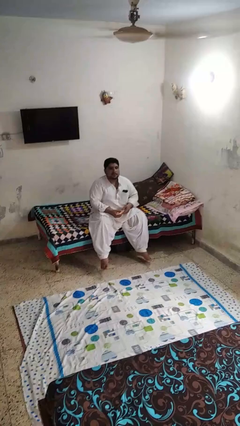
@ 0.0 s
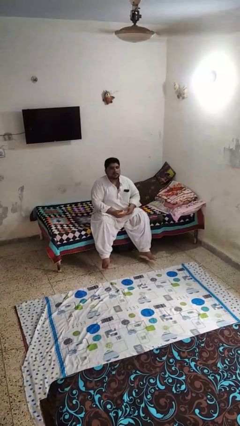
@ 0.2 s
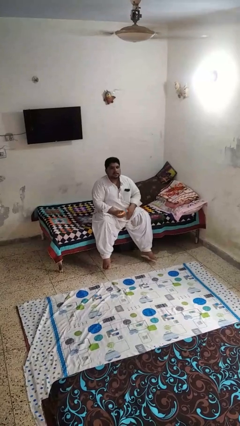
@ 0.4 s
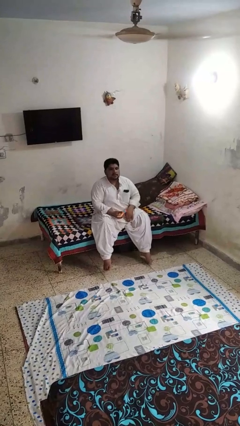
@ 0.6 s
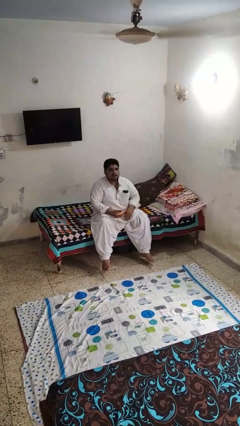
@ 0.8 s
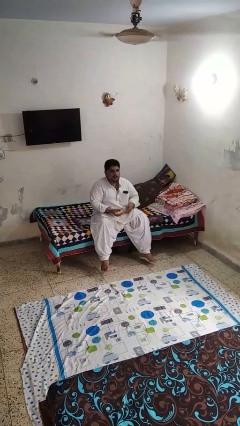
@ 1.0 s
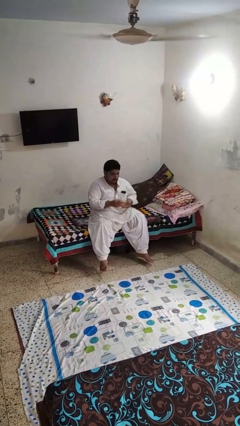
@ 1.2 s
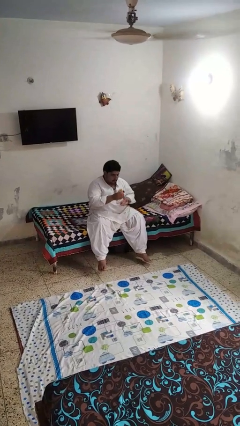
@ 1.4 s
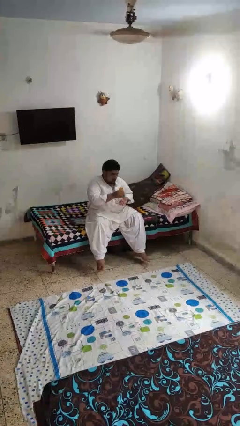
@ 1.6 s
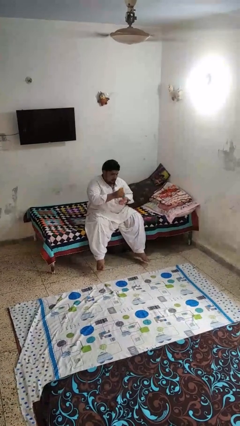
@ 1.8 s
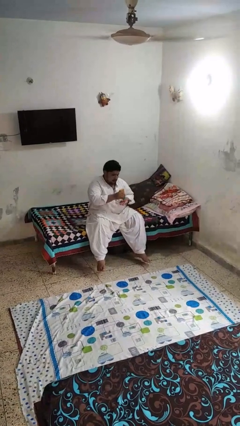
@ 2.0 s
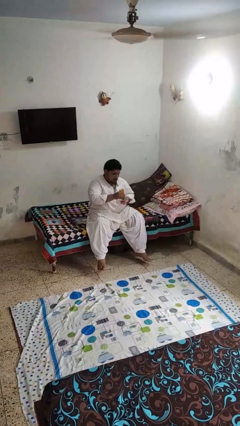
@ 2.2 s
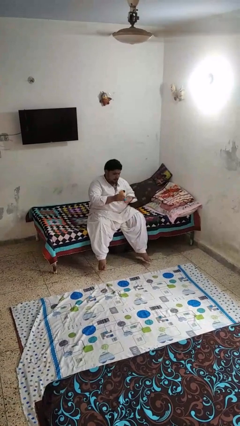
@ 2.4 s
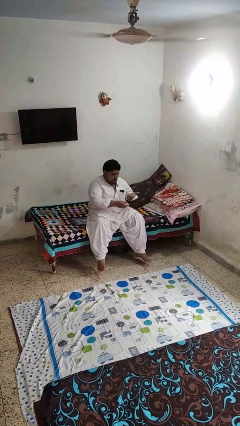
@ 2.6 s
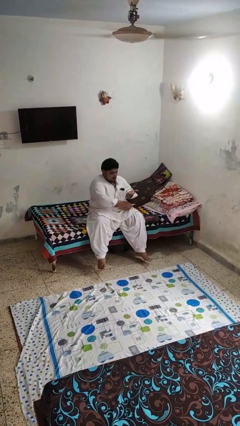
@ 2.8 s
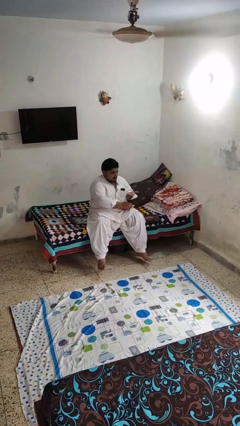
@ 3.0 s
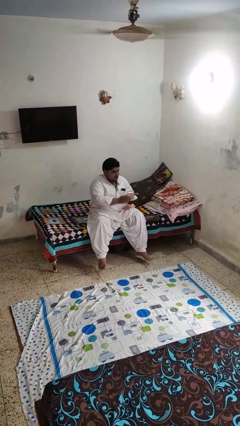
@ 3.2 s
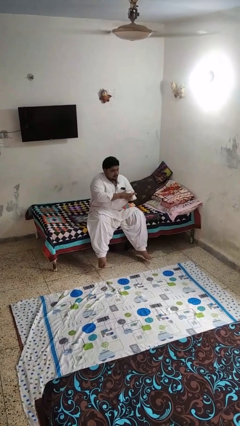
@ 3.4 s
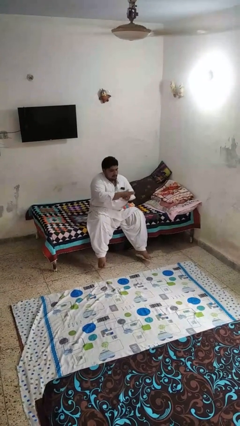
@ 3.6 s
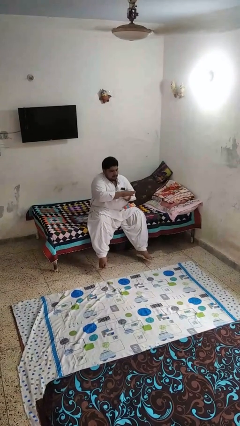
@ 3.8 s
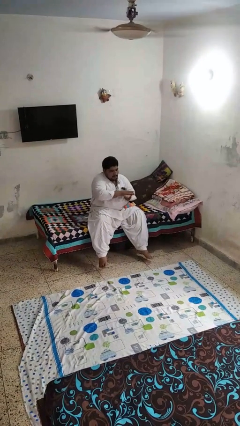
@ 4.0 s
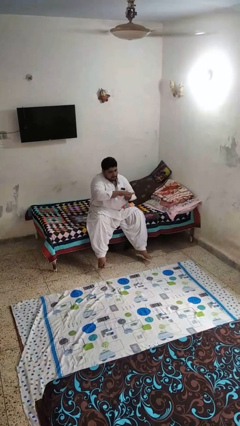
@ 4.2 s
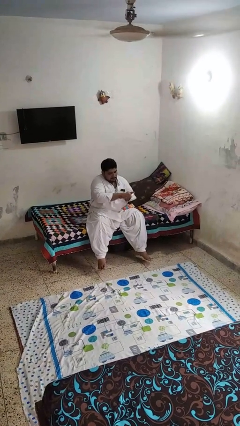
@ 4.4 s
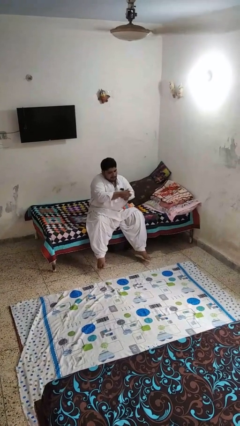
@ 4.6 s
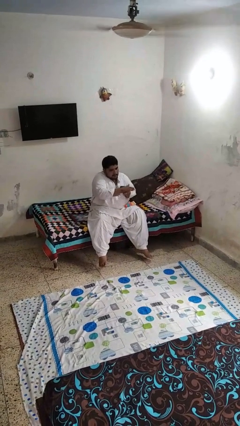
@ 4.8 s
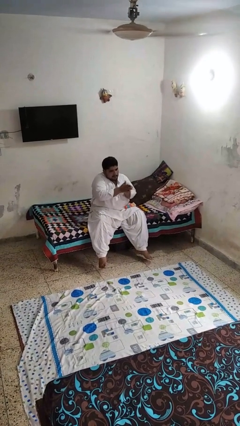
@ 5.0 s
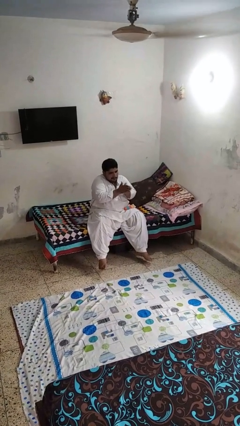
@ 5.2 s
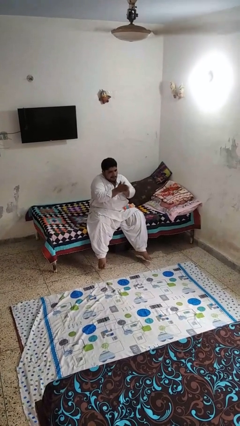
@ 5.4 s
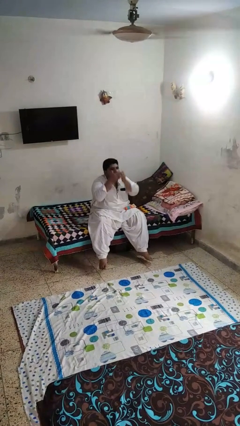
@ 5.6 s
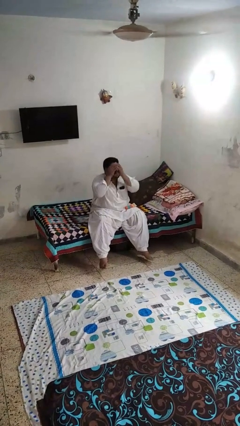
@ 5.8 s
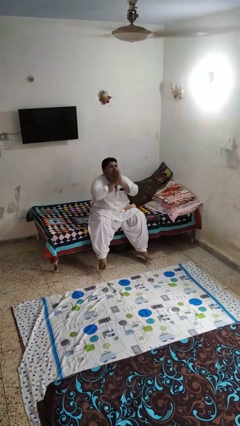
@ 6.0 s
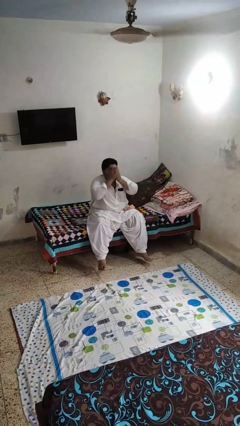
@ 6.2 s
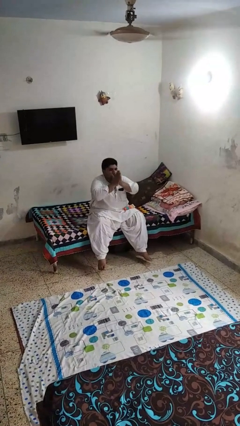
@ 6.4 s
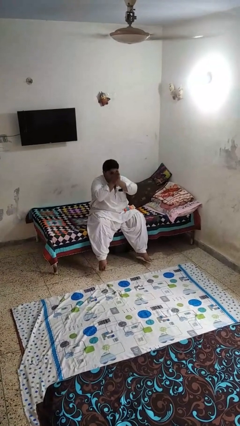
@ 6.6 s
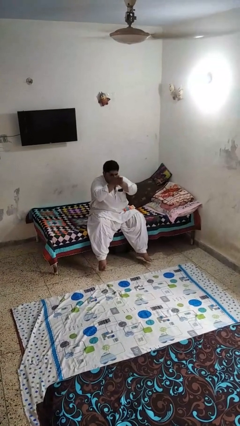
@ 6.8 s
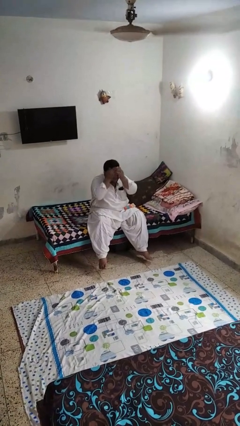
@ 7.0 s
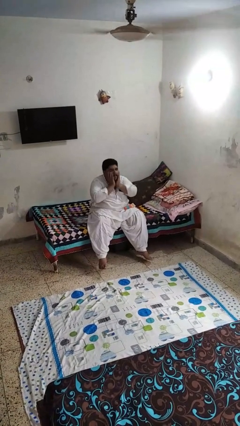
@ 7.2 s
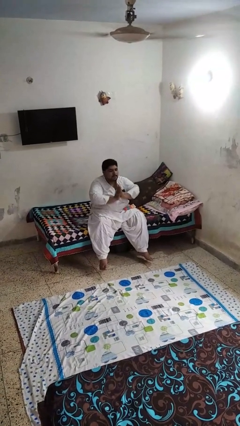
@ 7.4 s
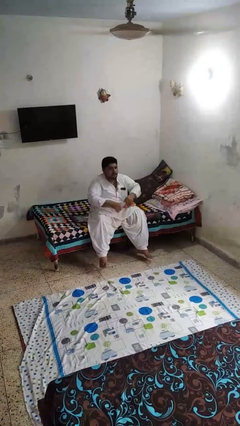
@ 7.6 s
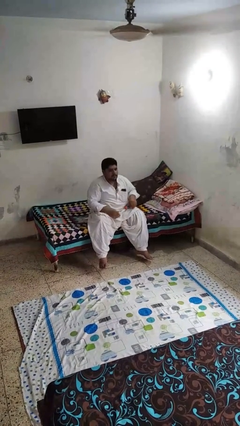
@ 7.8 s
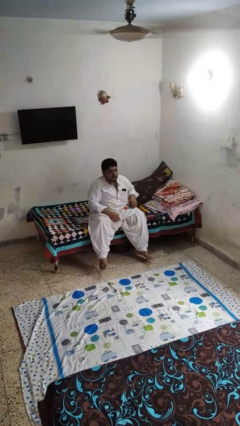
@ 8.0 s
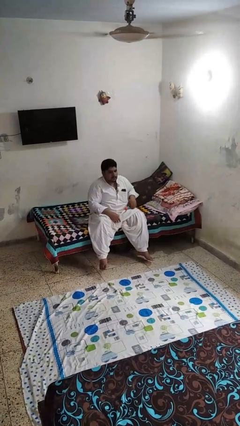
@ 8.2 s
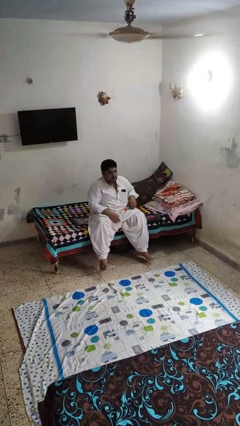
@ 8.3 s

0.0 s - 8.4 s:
person applies facial moisturizer

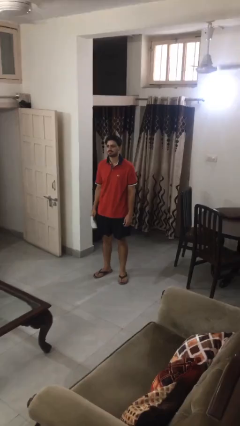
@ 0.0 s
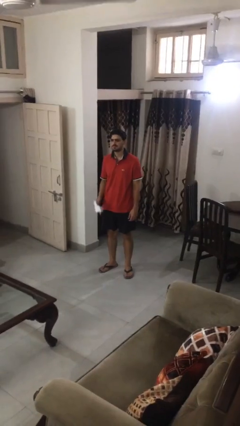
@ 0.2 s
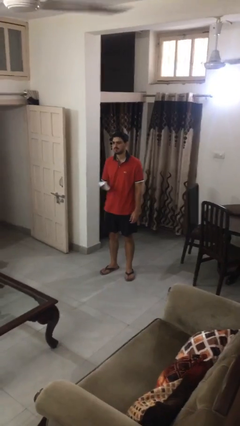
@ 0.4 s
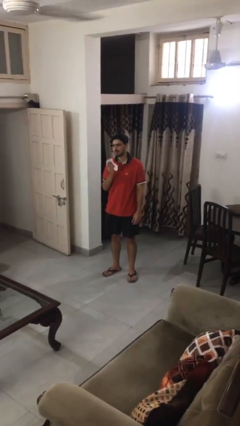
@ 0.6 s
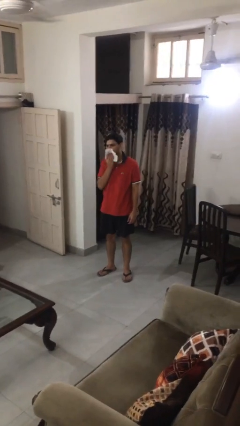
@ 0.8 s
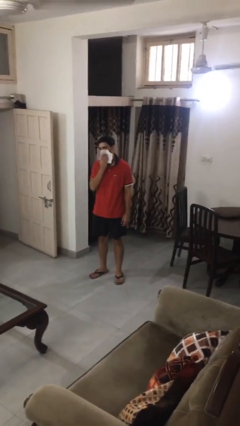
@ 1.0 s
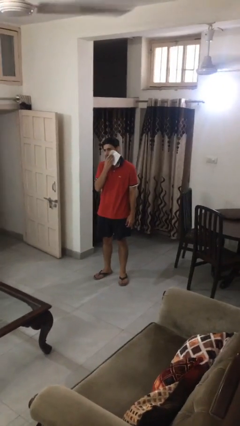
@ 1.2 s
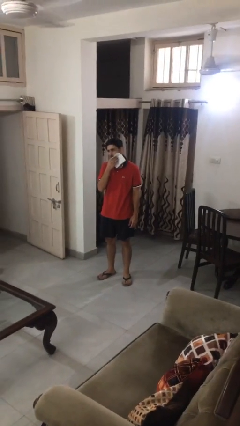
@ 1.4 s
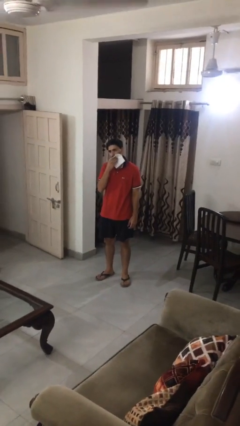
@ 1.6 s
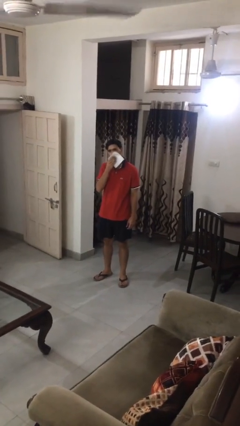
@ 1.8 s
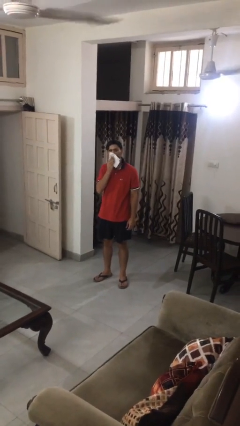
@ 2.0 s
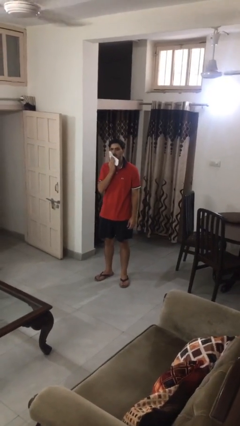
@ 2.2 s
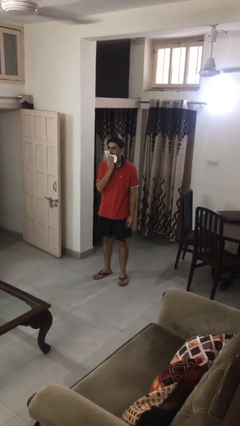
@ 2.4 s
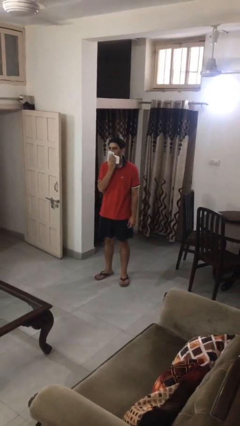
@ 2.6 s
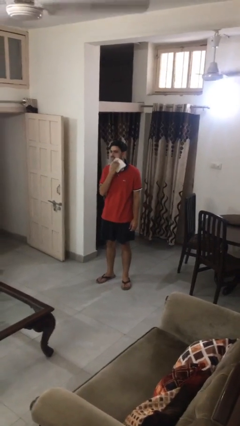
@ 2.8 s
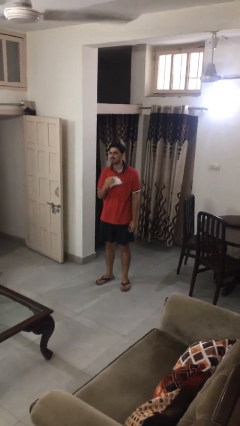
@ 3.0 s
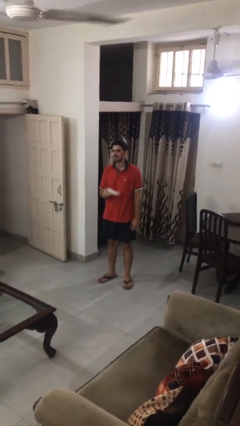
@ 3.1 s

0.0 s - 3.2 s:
person wipes mouth with napkin

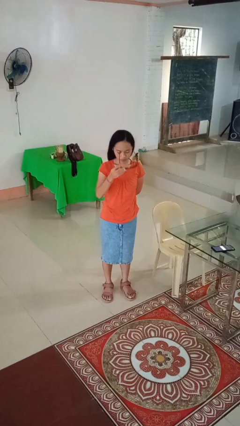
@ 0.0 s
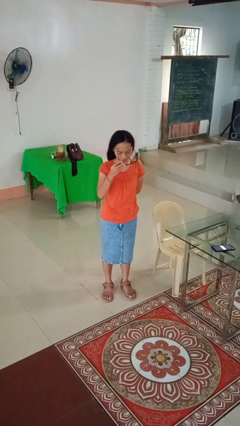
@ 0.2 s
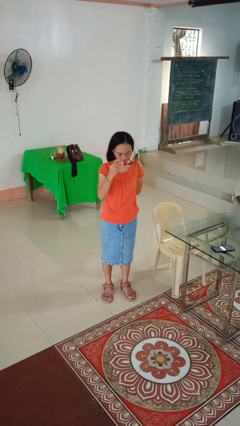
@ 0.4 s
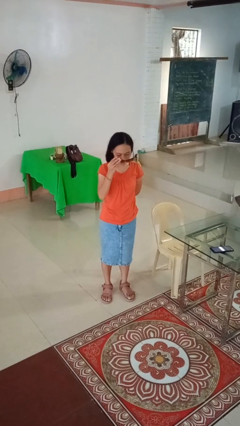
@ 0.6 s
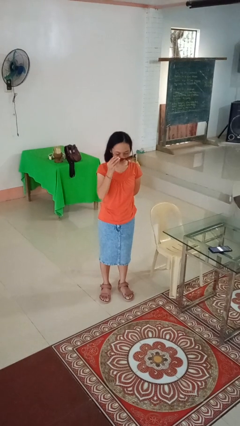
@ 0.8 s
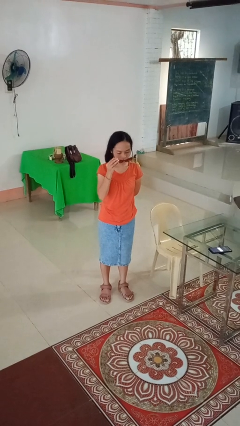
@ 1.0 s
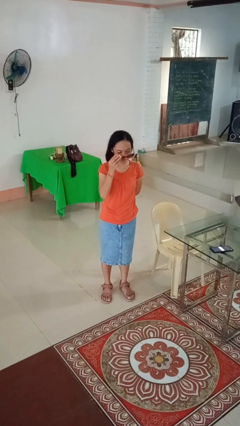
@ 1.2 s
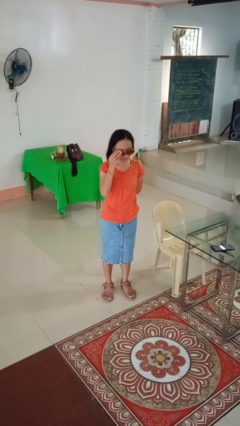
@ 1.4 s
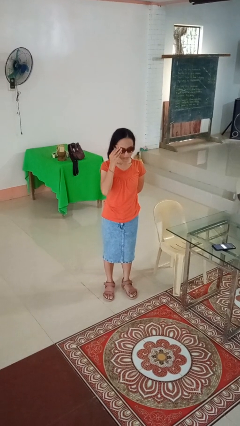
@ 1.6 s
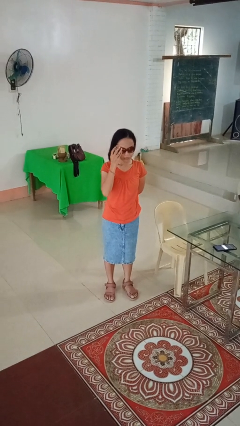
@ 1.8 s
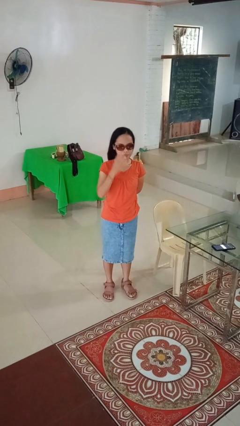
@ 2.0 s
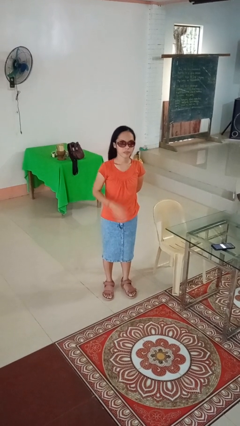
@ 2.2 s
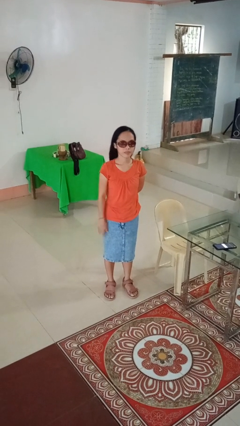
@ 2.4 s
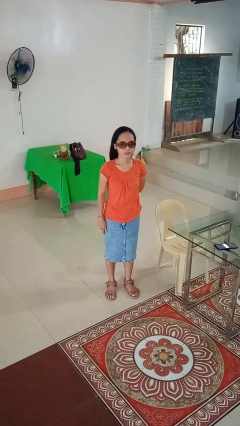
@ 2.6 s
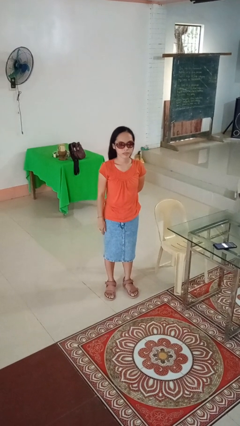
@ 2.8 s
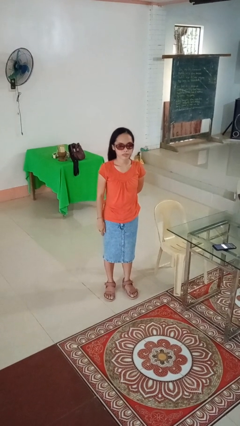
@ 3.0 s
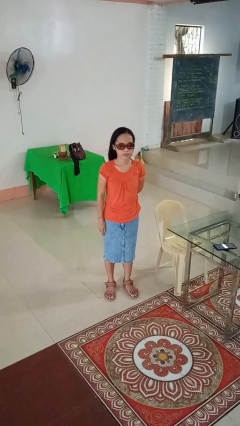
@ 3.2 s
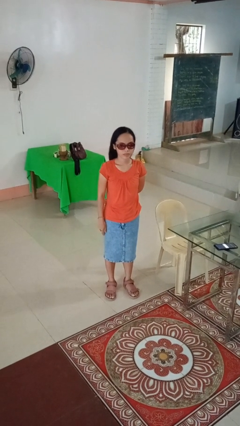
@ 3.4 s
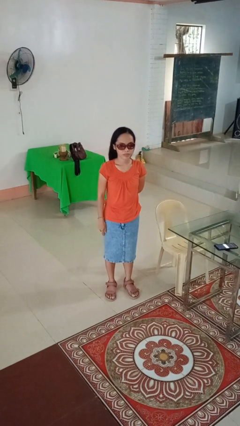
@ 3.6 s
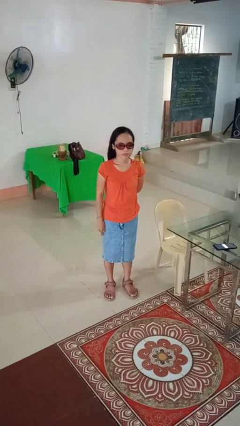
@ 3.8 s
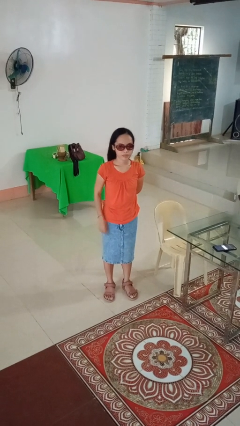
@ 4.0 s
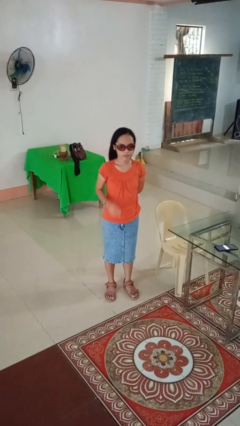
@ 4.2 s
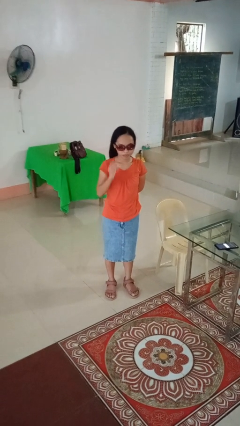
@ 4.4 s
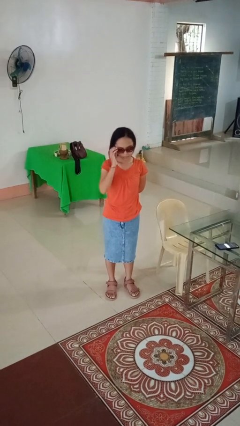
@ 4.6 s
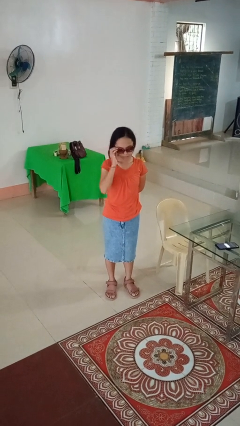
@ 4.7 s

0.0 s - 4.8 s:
person puts on sunglasses

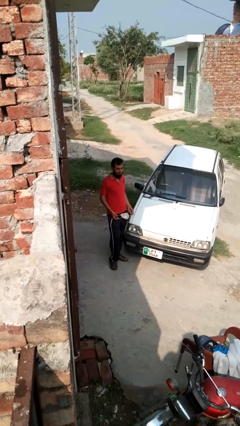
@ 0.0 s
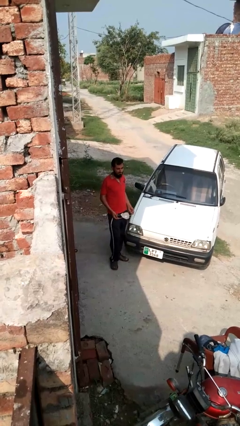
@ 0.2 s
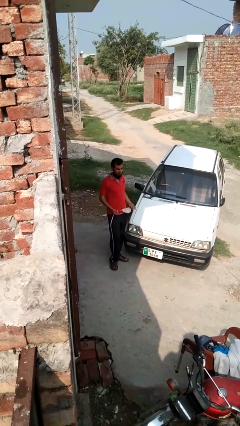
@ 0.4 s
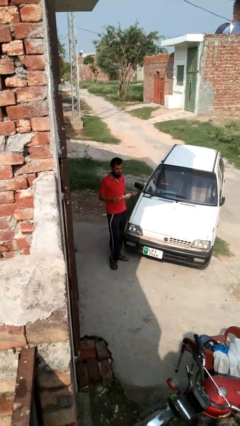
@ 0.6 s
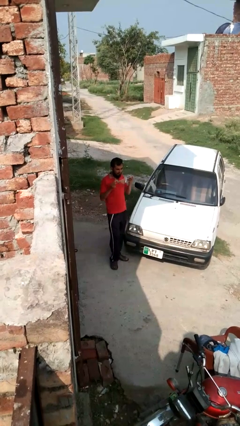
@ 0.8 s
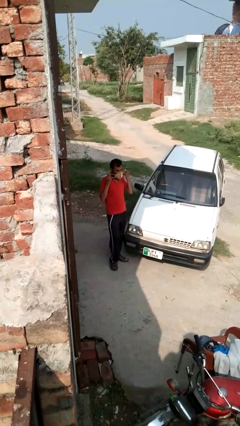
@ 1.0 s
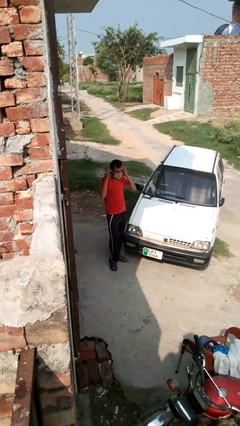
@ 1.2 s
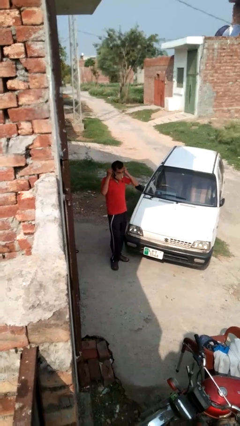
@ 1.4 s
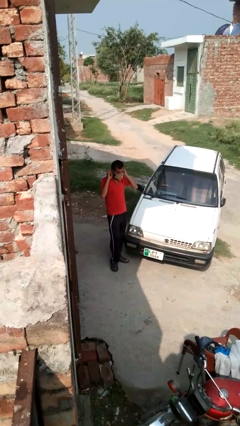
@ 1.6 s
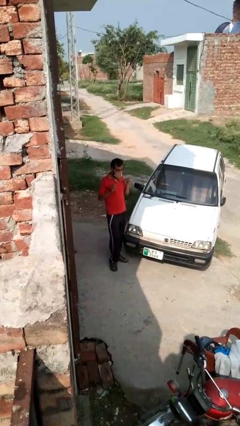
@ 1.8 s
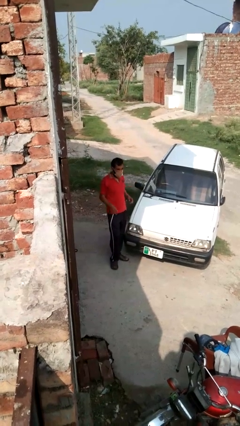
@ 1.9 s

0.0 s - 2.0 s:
person puts on facemask
